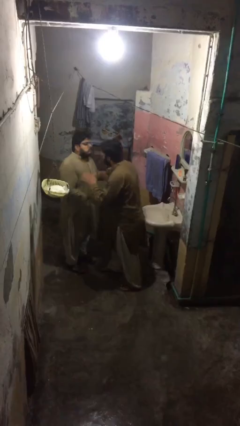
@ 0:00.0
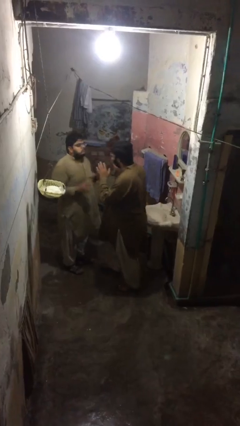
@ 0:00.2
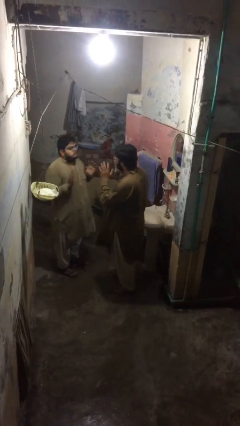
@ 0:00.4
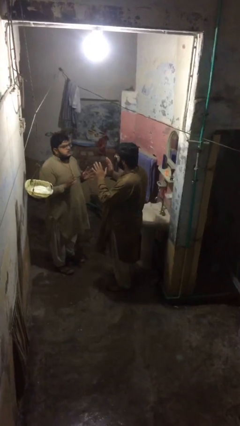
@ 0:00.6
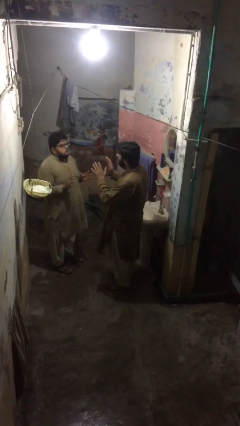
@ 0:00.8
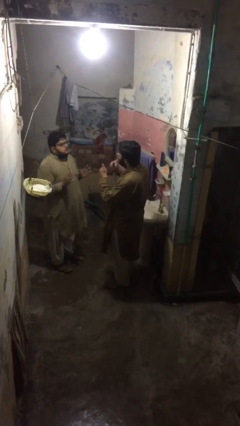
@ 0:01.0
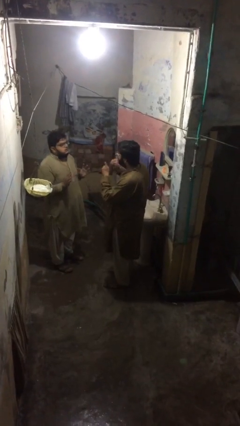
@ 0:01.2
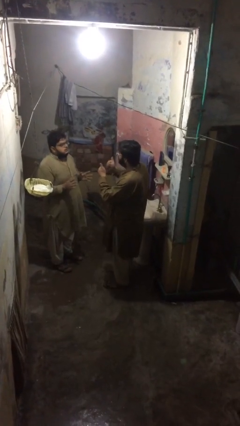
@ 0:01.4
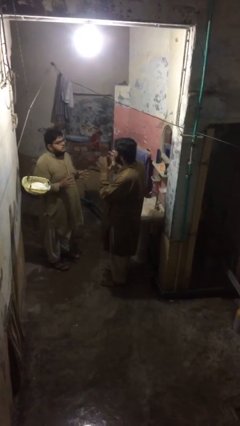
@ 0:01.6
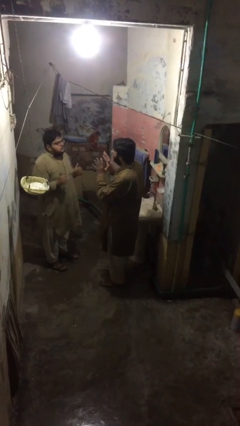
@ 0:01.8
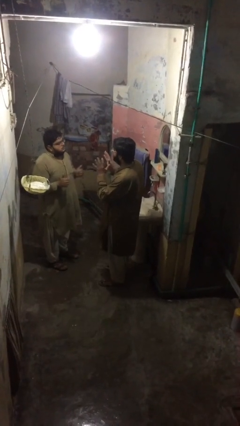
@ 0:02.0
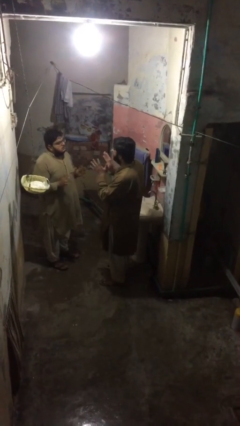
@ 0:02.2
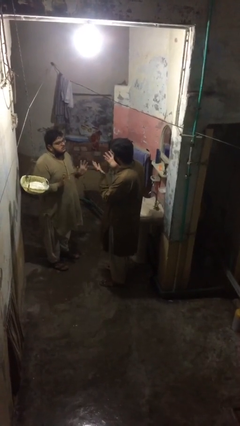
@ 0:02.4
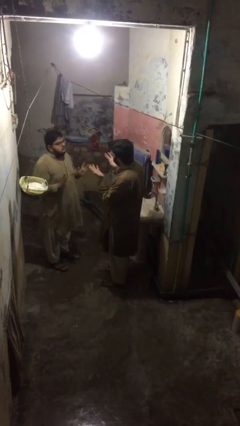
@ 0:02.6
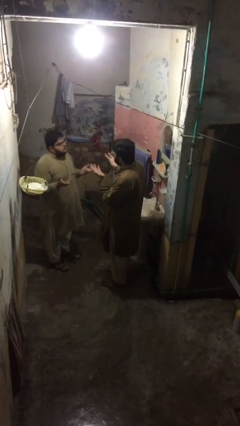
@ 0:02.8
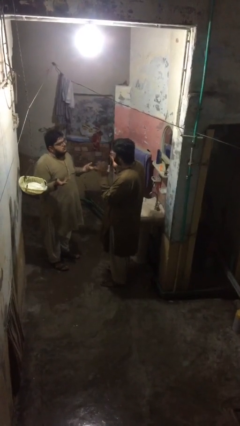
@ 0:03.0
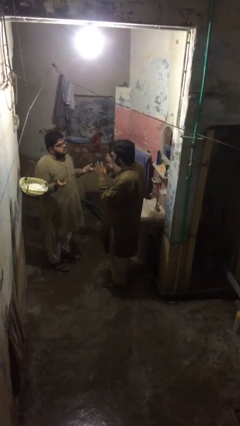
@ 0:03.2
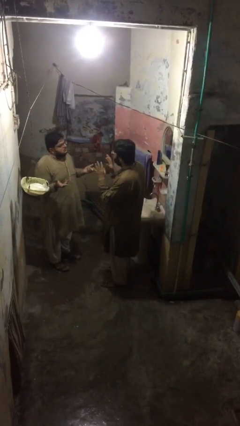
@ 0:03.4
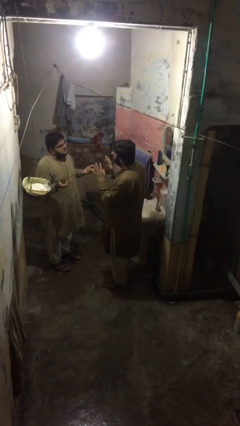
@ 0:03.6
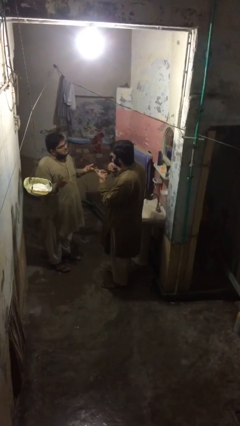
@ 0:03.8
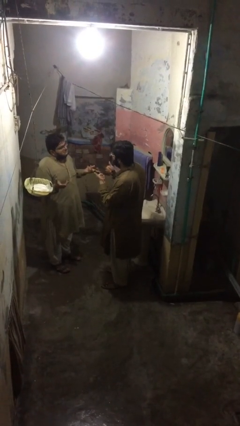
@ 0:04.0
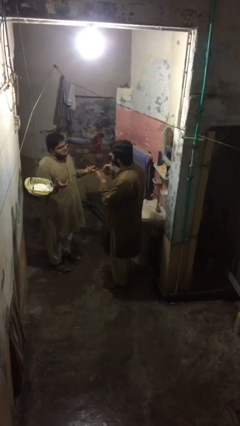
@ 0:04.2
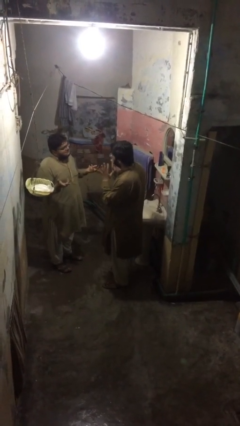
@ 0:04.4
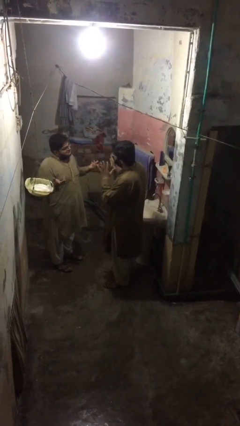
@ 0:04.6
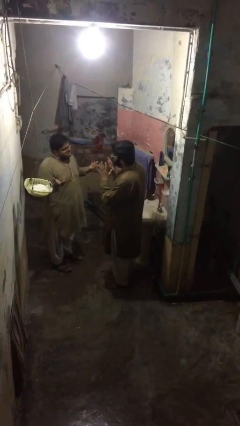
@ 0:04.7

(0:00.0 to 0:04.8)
person talks to person

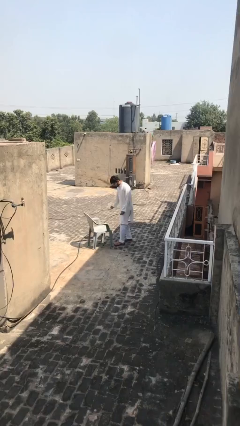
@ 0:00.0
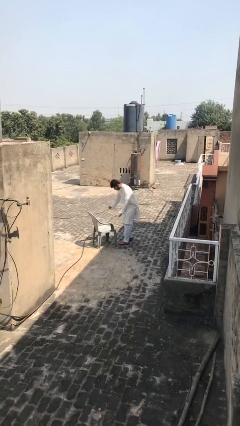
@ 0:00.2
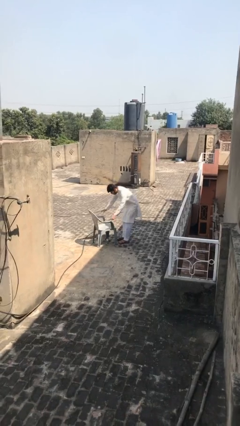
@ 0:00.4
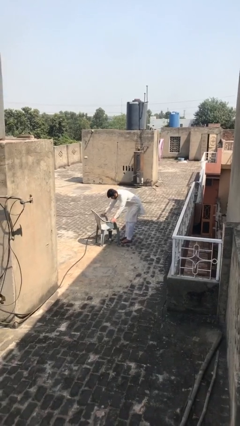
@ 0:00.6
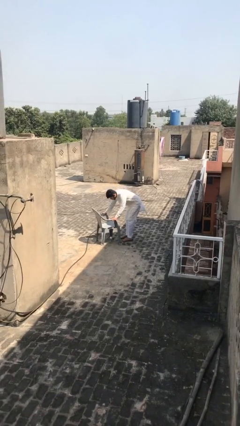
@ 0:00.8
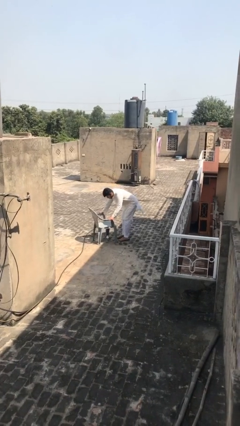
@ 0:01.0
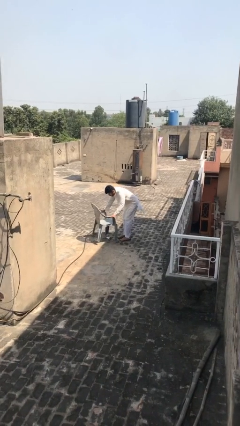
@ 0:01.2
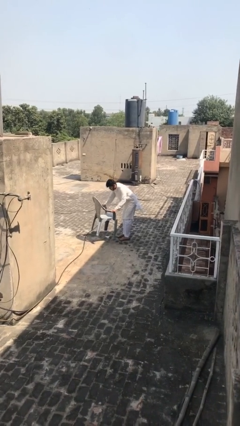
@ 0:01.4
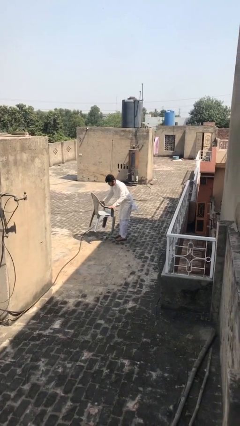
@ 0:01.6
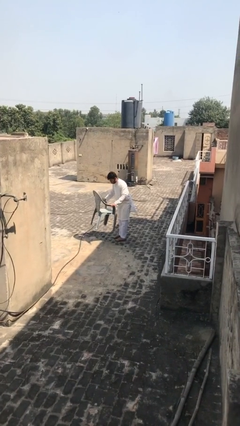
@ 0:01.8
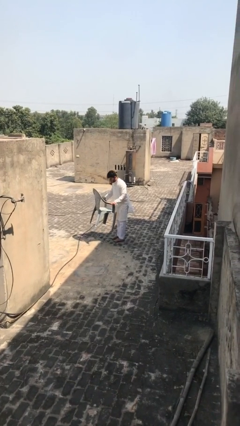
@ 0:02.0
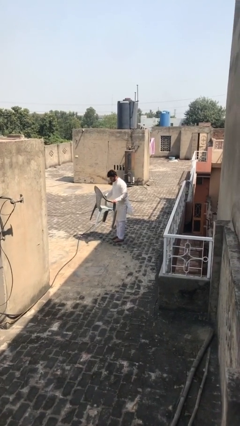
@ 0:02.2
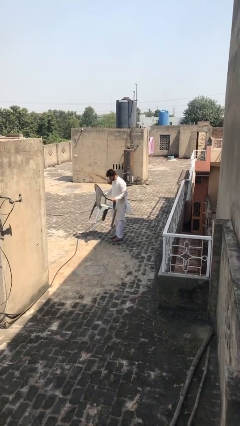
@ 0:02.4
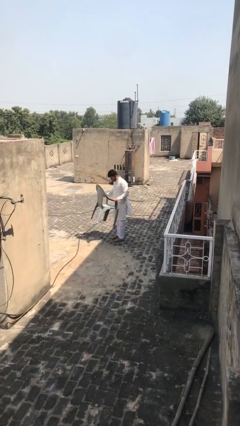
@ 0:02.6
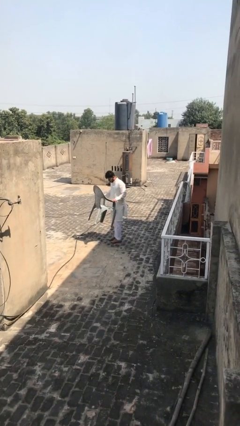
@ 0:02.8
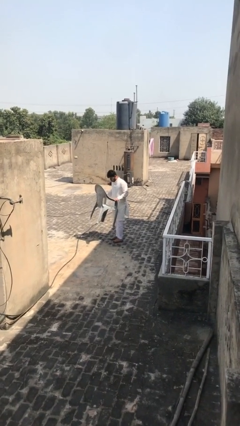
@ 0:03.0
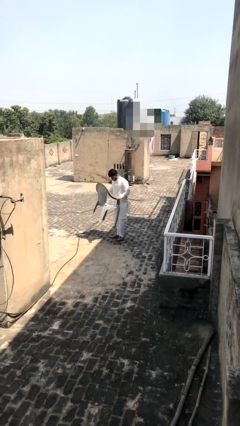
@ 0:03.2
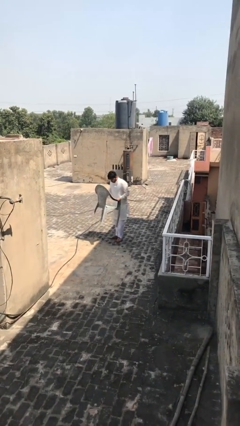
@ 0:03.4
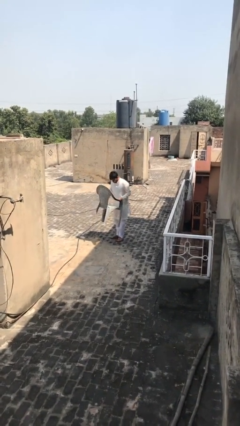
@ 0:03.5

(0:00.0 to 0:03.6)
person picks up object from floor

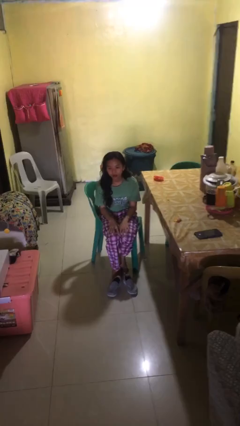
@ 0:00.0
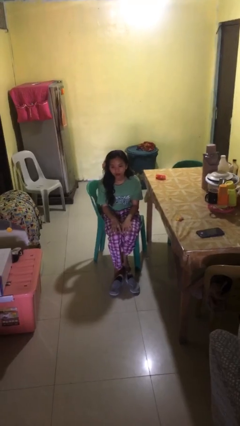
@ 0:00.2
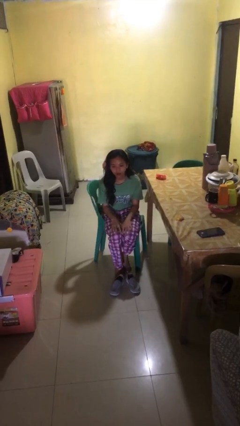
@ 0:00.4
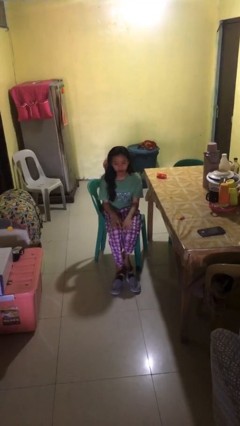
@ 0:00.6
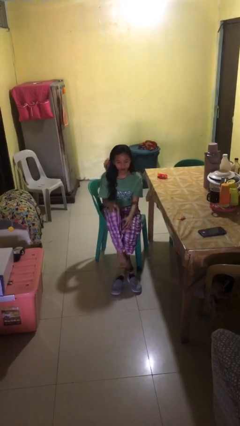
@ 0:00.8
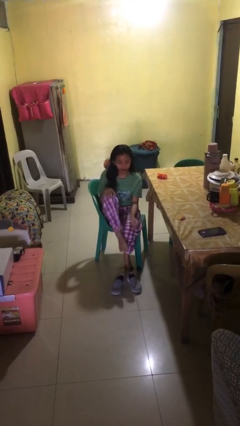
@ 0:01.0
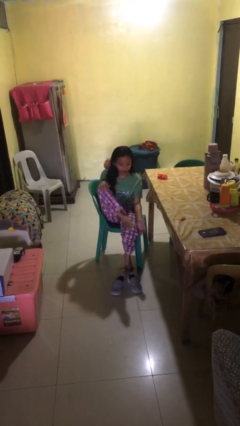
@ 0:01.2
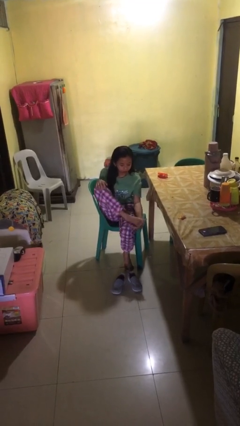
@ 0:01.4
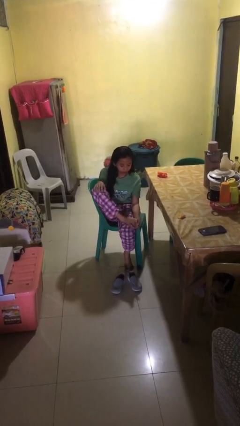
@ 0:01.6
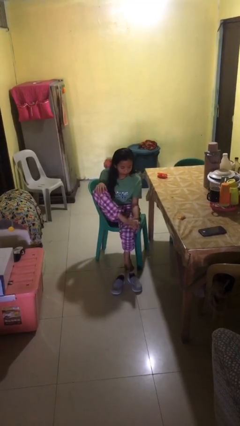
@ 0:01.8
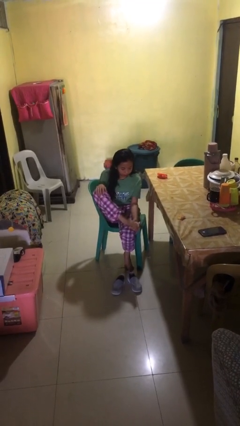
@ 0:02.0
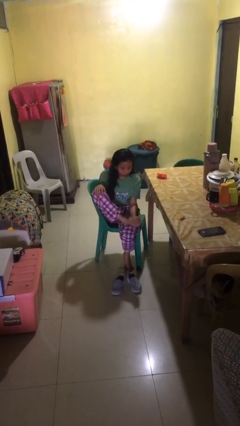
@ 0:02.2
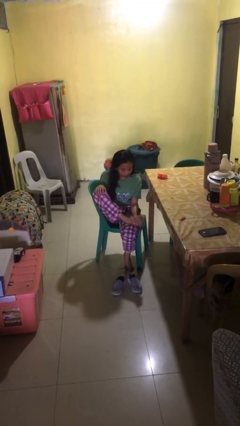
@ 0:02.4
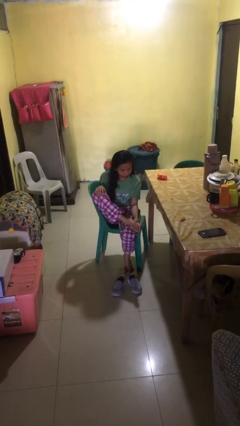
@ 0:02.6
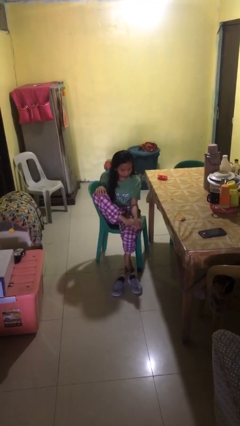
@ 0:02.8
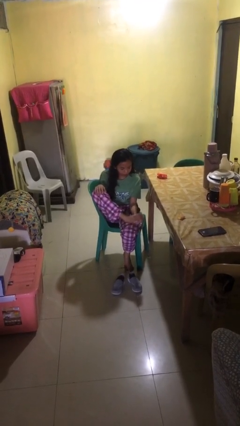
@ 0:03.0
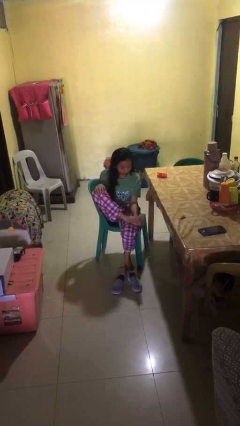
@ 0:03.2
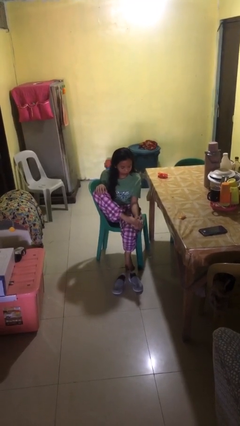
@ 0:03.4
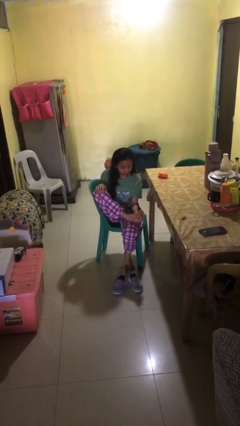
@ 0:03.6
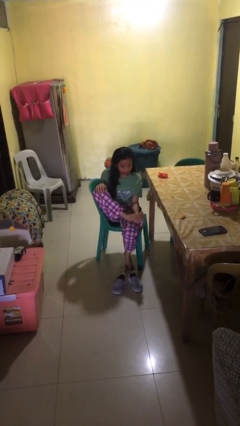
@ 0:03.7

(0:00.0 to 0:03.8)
person rubs foot

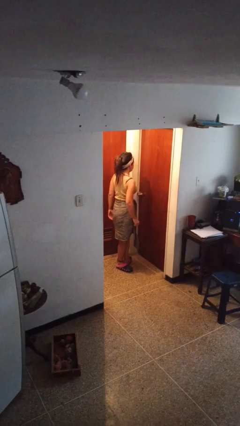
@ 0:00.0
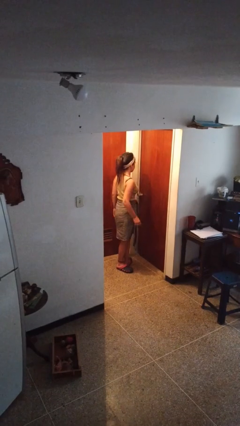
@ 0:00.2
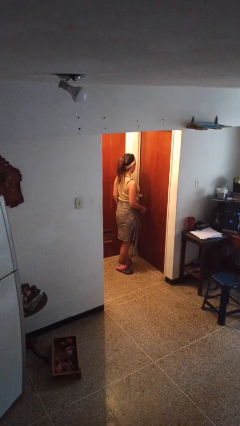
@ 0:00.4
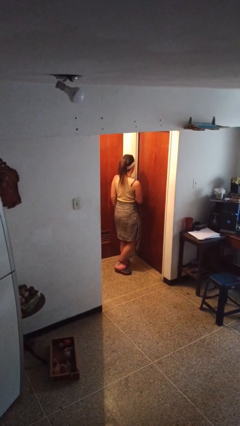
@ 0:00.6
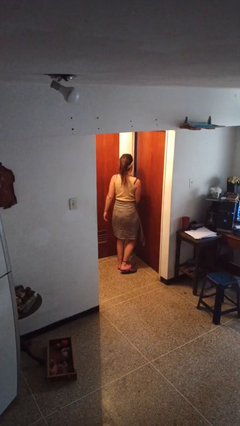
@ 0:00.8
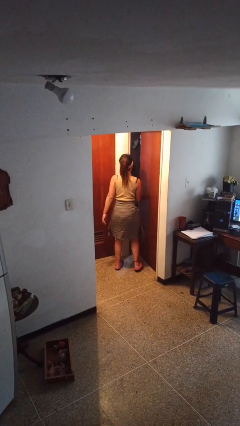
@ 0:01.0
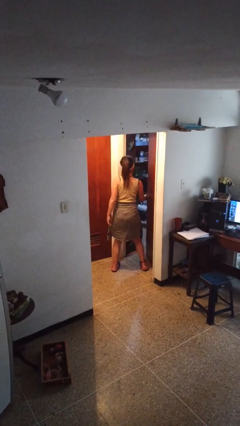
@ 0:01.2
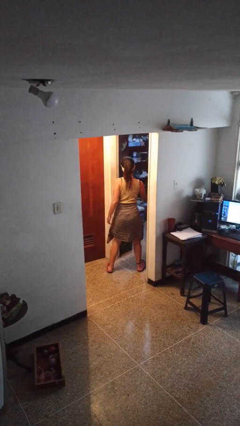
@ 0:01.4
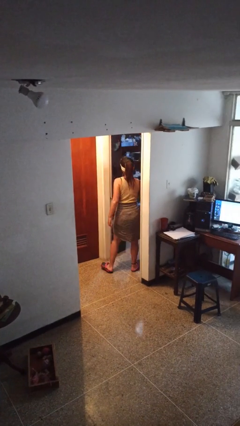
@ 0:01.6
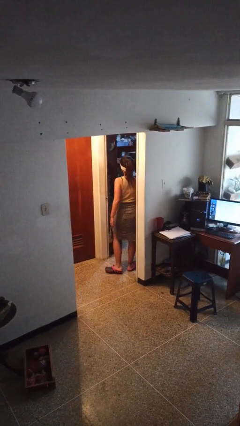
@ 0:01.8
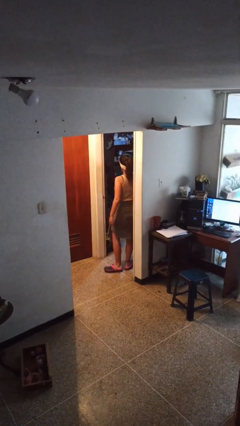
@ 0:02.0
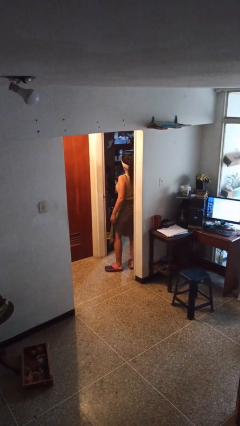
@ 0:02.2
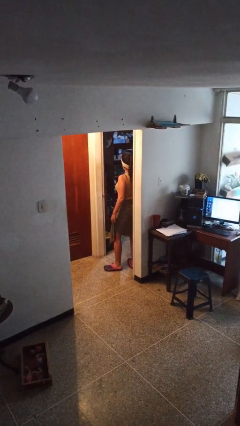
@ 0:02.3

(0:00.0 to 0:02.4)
person opens facility door

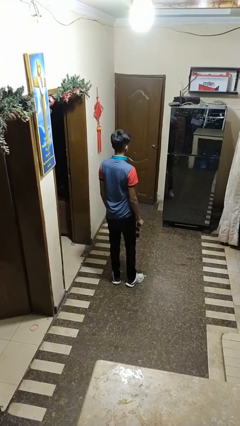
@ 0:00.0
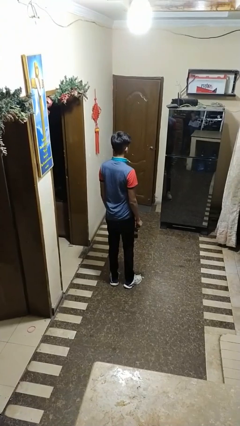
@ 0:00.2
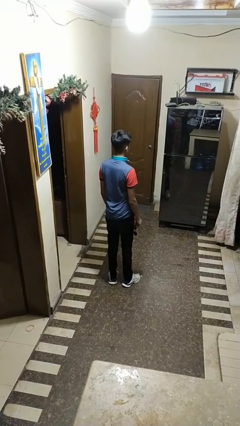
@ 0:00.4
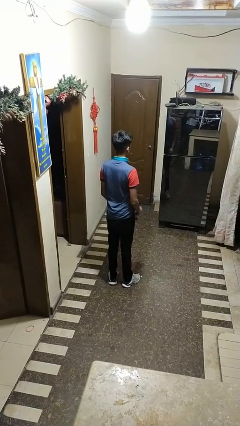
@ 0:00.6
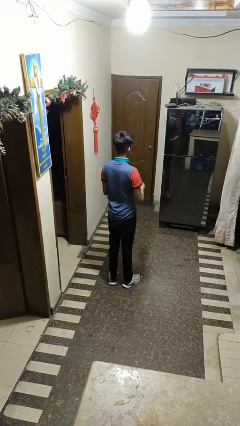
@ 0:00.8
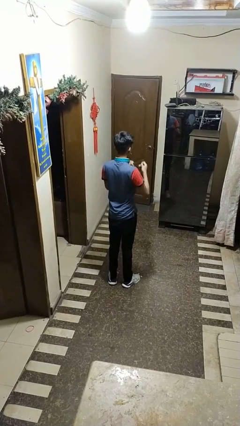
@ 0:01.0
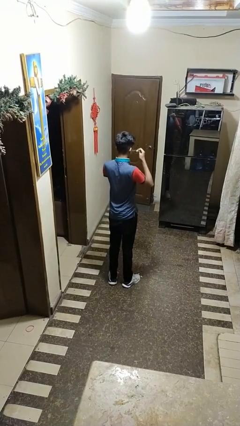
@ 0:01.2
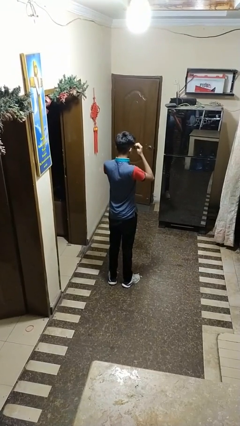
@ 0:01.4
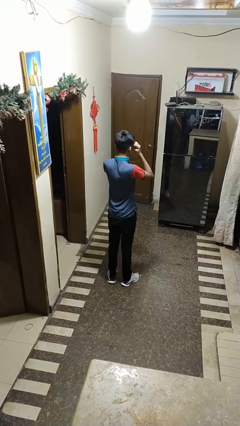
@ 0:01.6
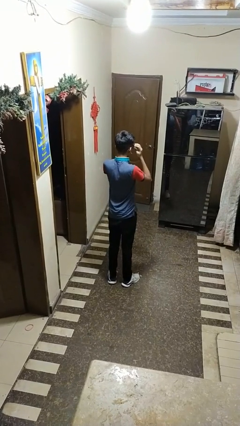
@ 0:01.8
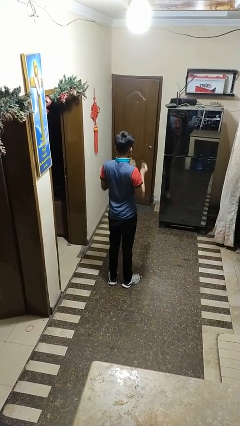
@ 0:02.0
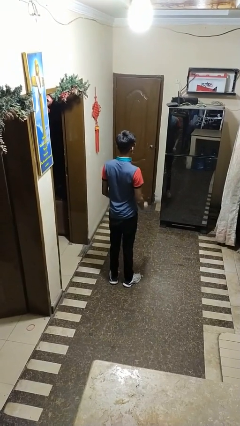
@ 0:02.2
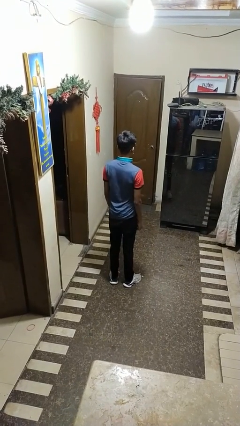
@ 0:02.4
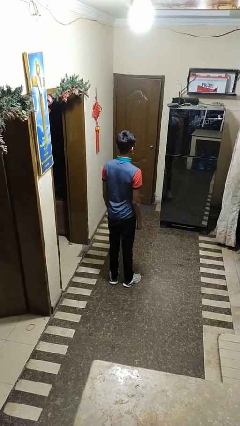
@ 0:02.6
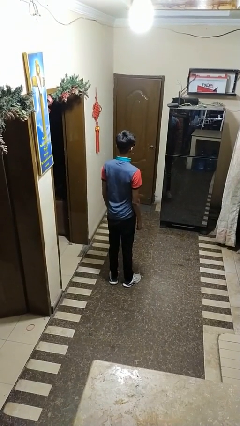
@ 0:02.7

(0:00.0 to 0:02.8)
person puts on sunglasses
